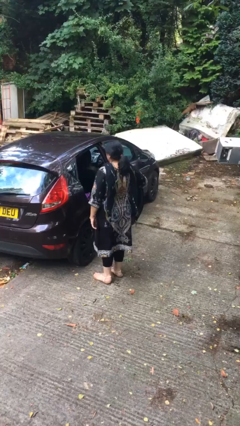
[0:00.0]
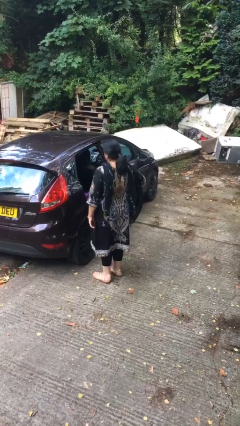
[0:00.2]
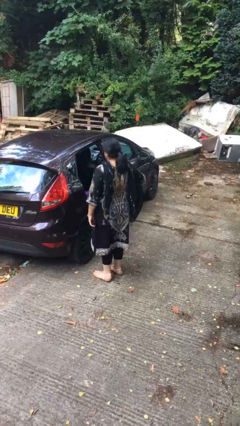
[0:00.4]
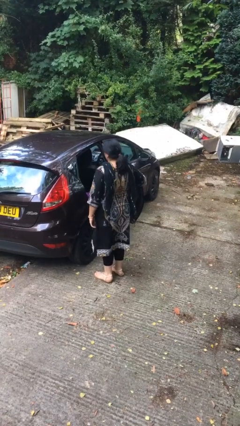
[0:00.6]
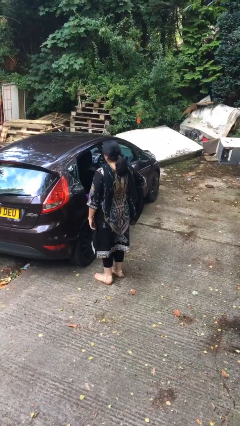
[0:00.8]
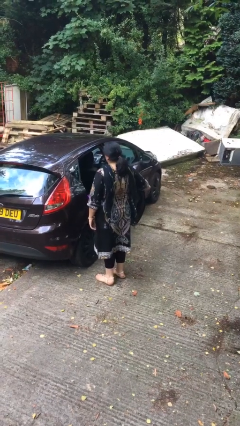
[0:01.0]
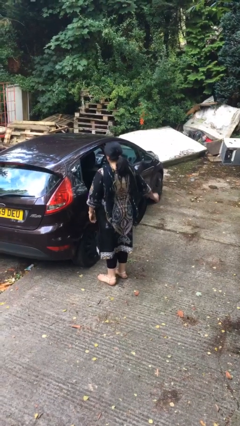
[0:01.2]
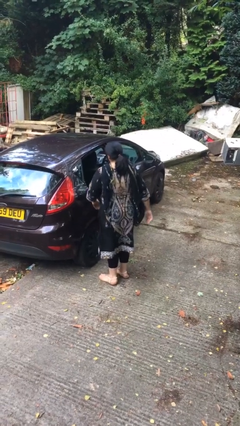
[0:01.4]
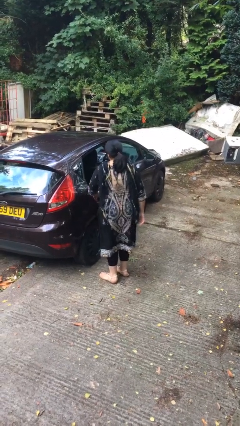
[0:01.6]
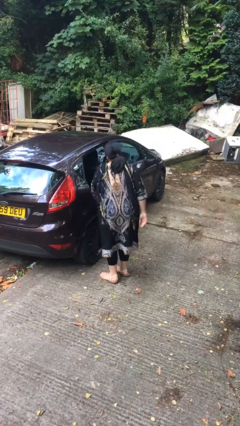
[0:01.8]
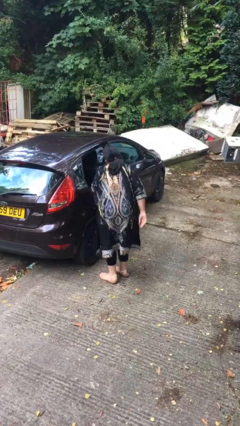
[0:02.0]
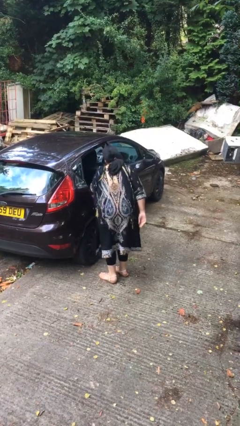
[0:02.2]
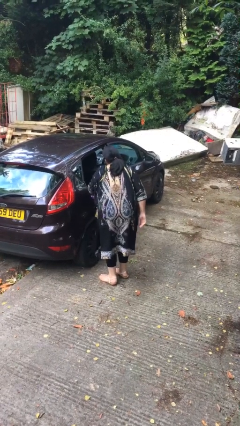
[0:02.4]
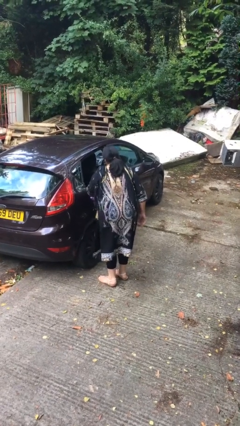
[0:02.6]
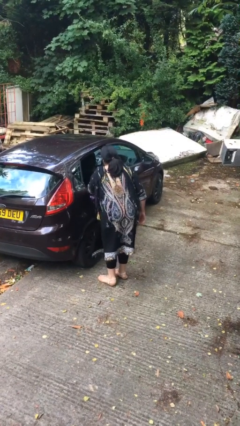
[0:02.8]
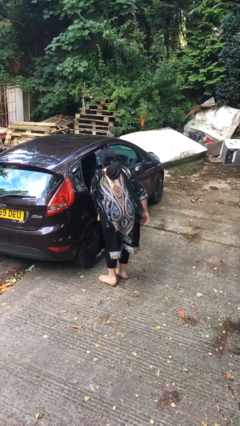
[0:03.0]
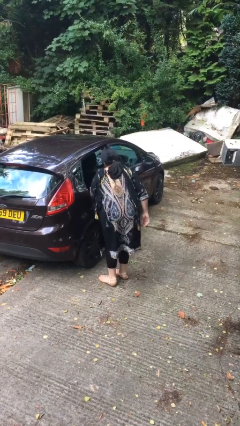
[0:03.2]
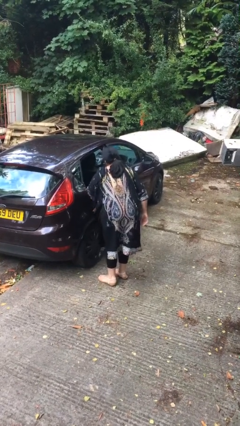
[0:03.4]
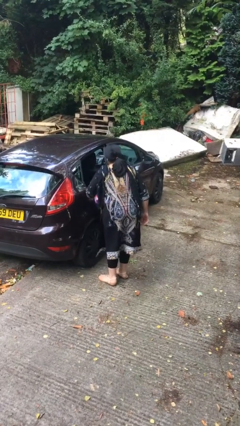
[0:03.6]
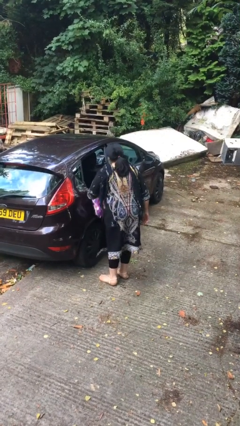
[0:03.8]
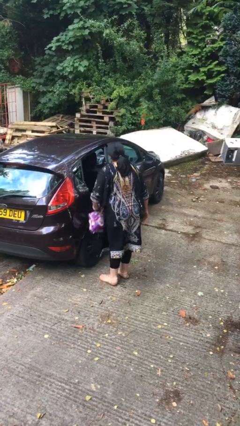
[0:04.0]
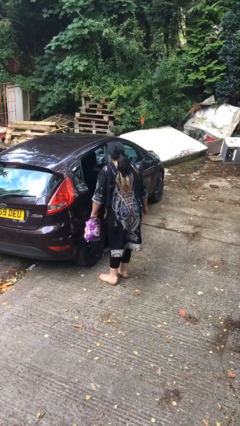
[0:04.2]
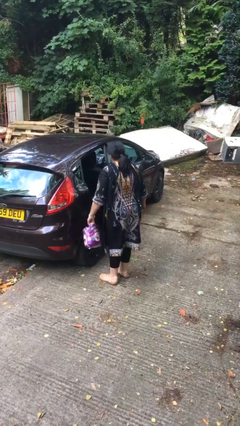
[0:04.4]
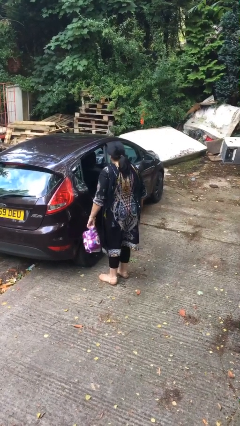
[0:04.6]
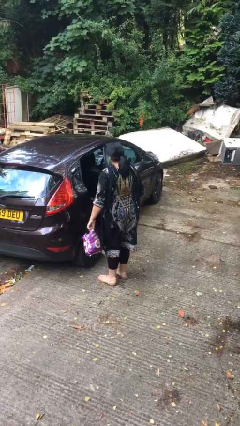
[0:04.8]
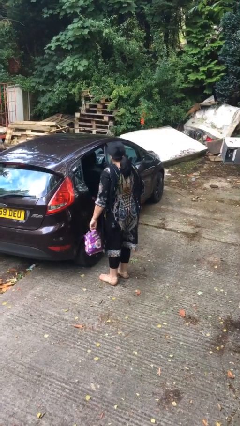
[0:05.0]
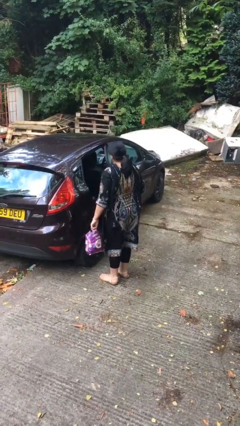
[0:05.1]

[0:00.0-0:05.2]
person unloads car

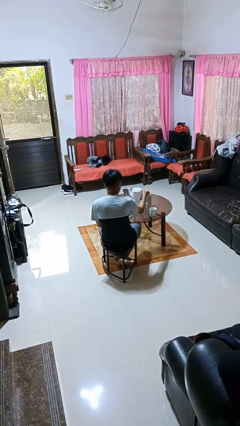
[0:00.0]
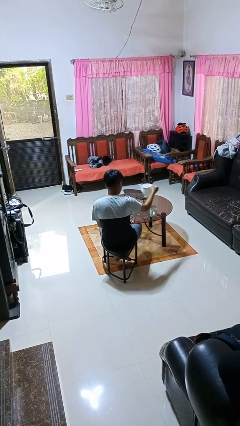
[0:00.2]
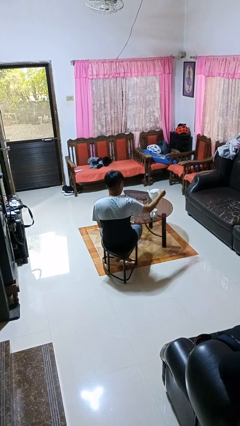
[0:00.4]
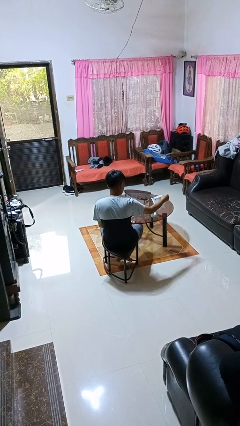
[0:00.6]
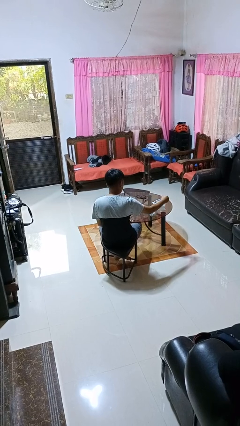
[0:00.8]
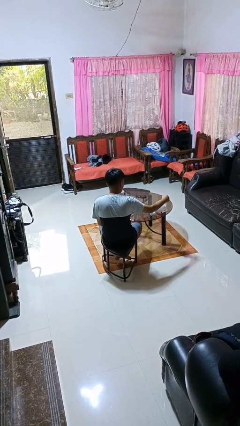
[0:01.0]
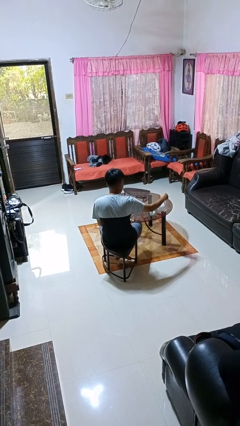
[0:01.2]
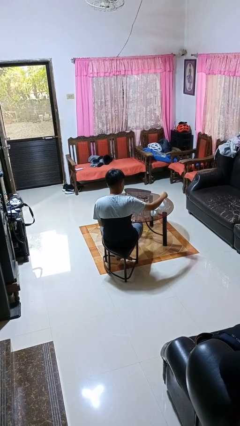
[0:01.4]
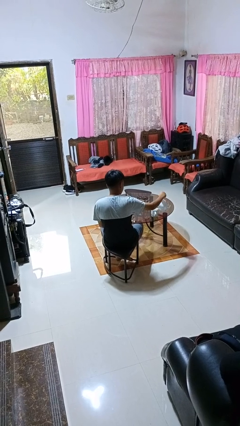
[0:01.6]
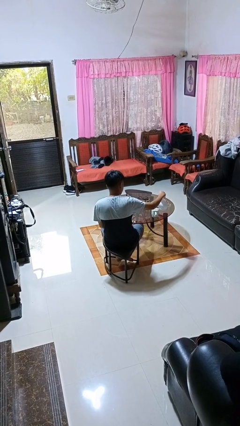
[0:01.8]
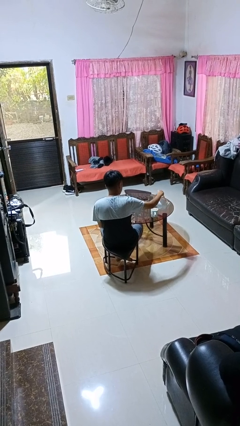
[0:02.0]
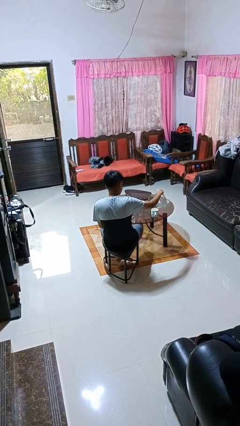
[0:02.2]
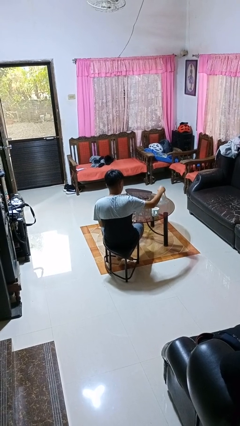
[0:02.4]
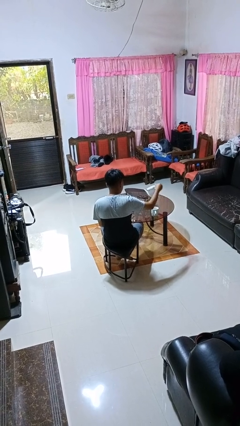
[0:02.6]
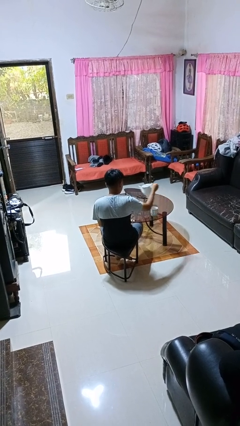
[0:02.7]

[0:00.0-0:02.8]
person pours coffee into mug

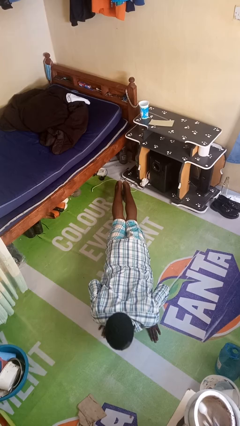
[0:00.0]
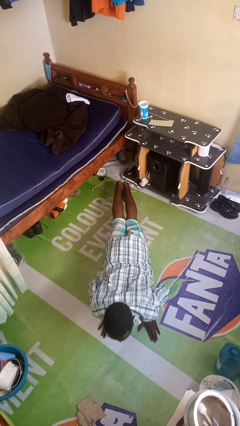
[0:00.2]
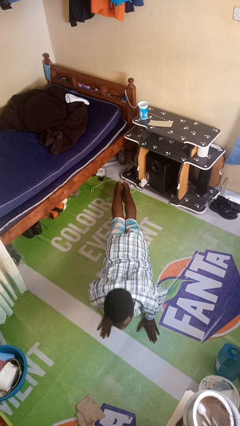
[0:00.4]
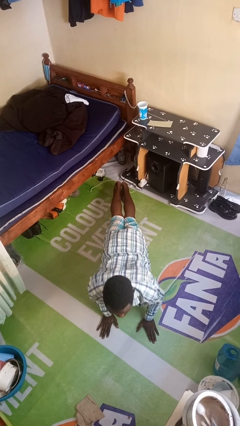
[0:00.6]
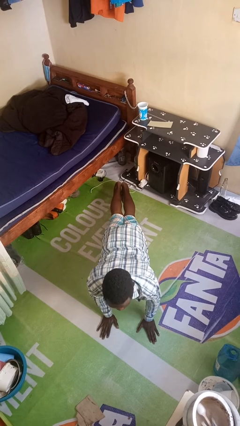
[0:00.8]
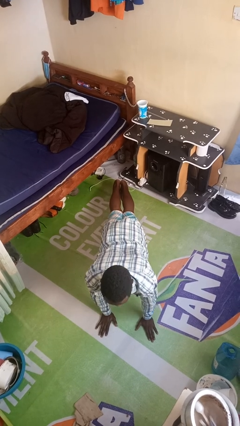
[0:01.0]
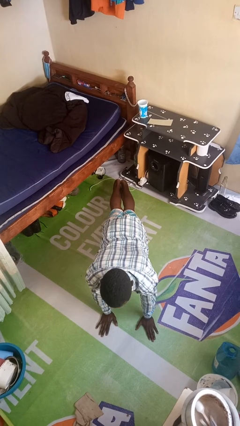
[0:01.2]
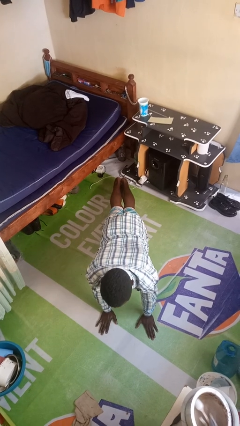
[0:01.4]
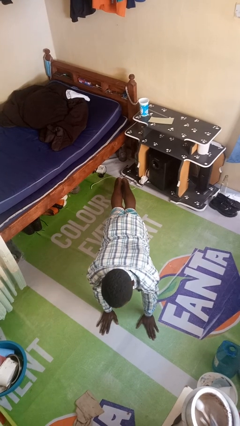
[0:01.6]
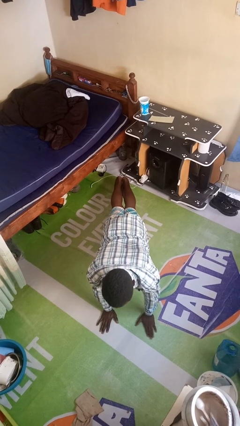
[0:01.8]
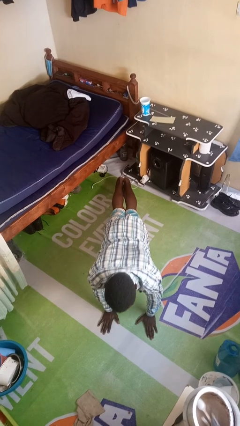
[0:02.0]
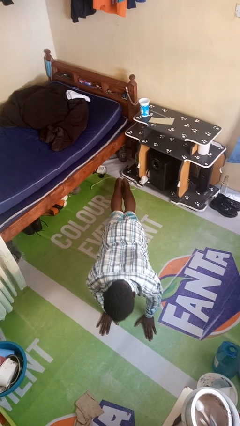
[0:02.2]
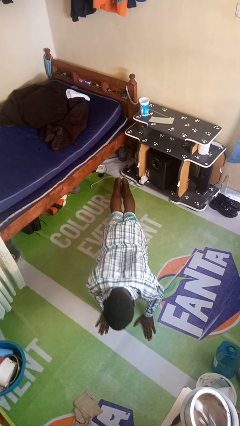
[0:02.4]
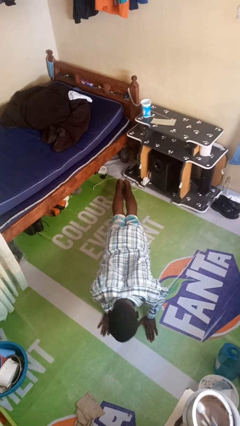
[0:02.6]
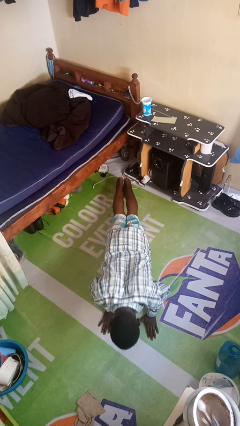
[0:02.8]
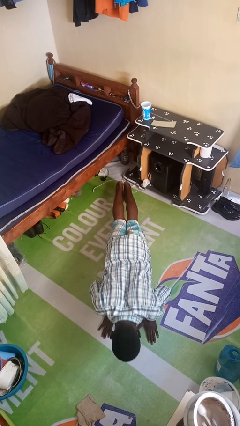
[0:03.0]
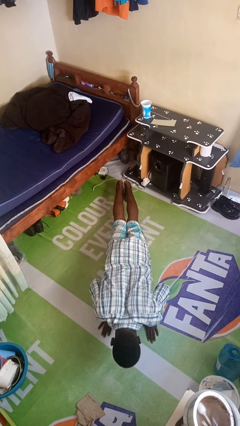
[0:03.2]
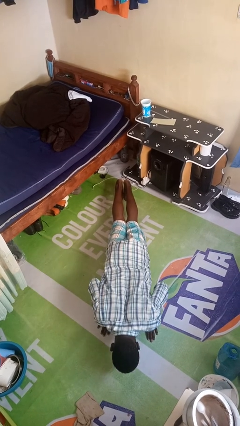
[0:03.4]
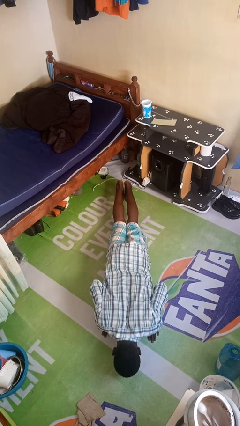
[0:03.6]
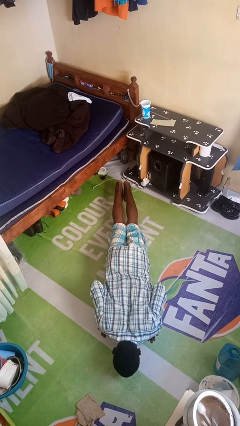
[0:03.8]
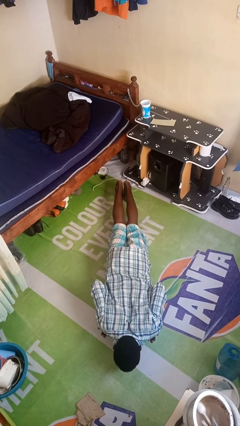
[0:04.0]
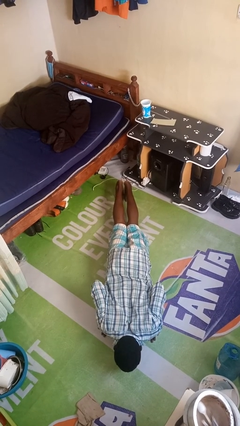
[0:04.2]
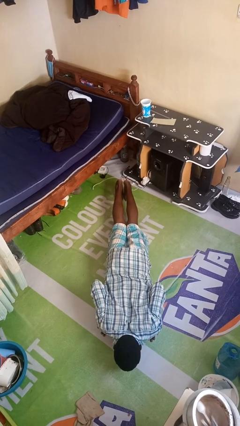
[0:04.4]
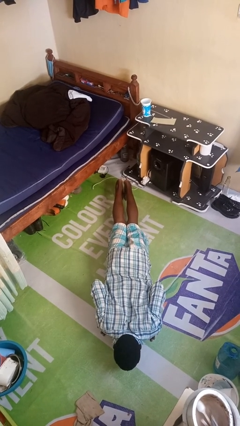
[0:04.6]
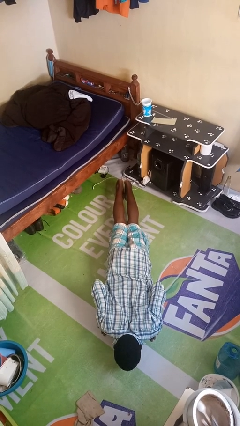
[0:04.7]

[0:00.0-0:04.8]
person exercises with pushup

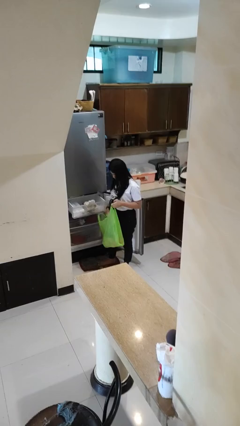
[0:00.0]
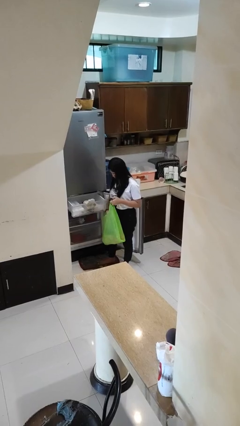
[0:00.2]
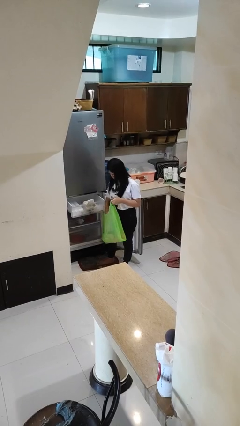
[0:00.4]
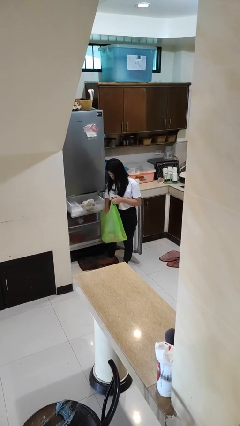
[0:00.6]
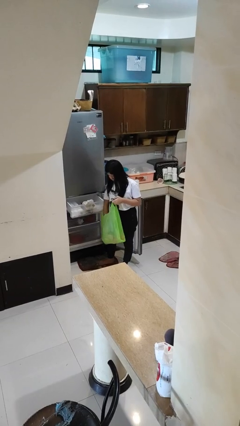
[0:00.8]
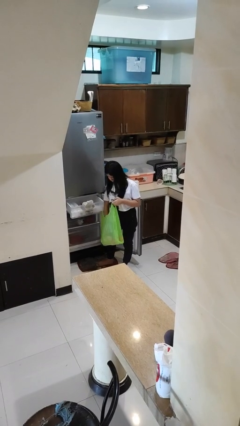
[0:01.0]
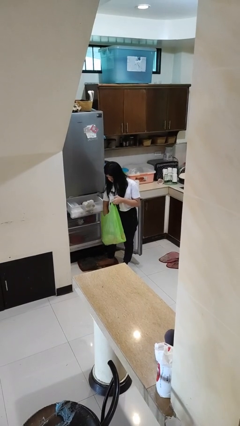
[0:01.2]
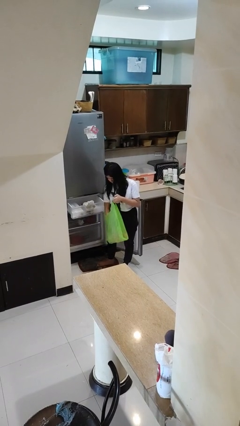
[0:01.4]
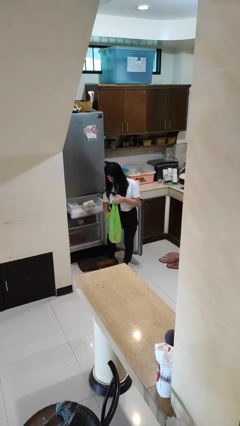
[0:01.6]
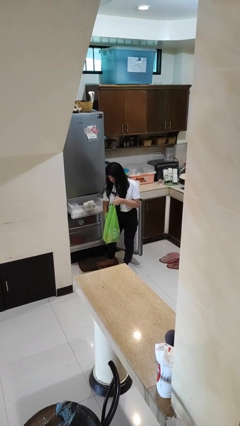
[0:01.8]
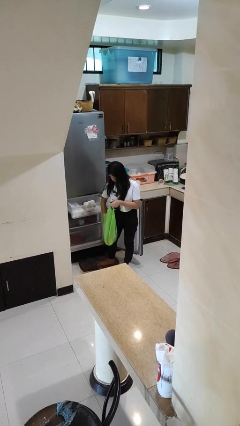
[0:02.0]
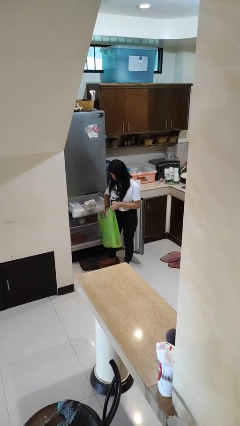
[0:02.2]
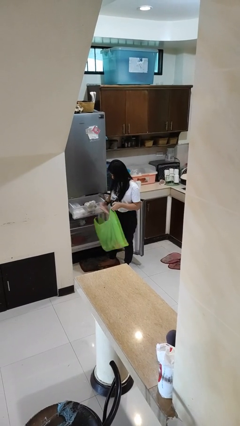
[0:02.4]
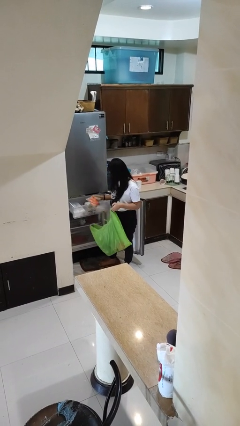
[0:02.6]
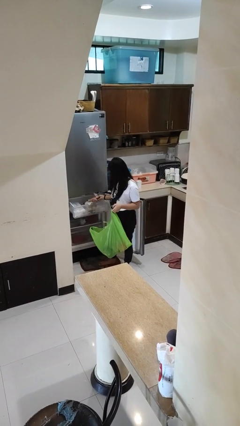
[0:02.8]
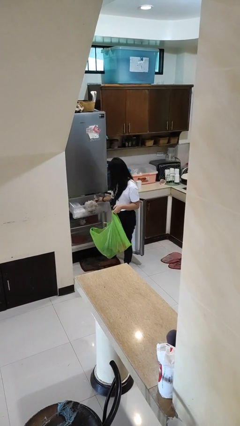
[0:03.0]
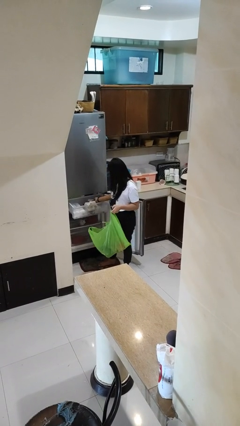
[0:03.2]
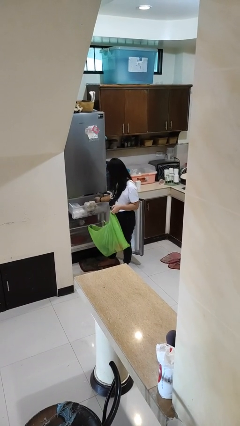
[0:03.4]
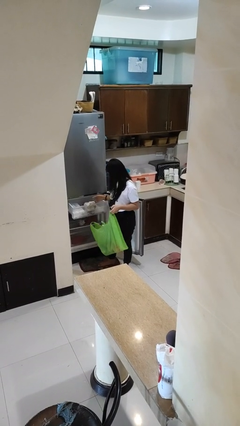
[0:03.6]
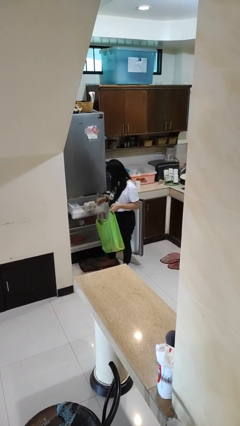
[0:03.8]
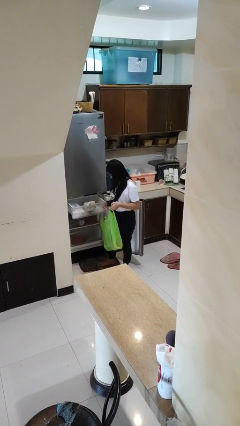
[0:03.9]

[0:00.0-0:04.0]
person loads groceries into refrigerator

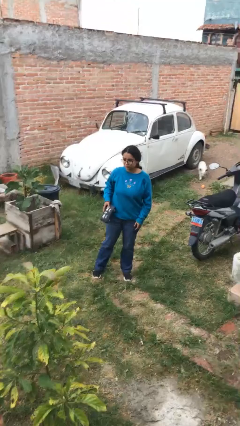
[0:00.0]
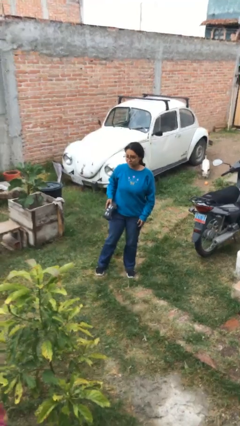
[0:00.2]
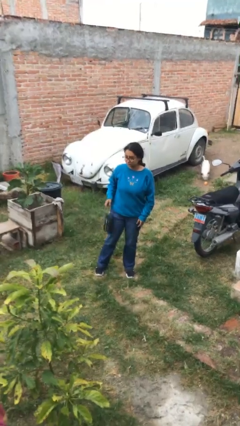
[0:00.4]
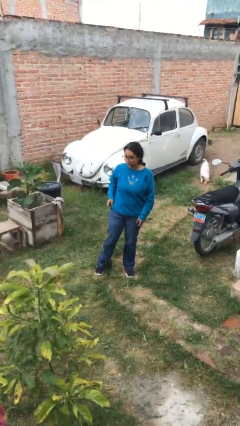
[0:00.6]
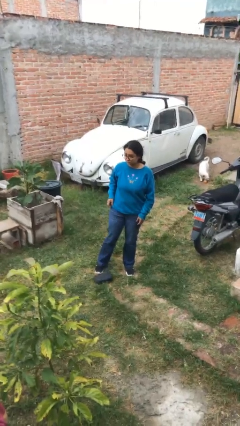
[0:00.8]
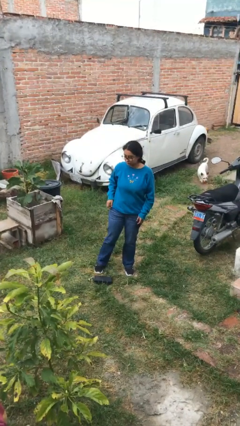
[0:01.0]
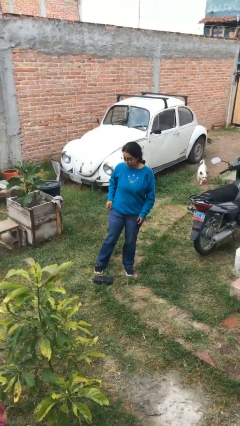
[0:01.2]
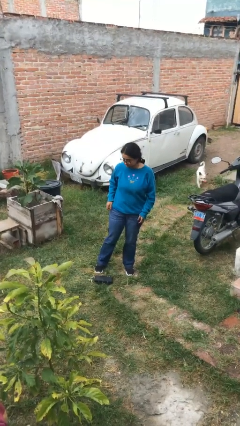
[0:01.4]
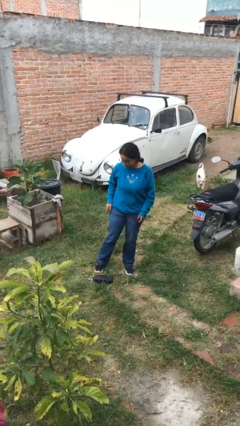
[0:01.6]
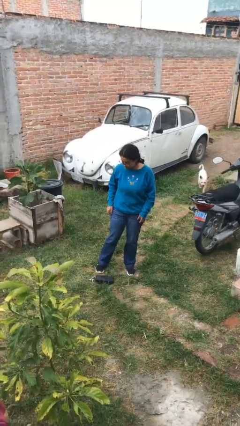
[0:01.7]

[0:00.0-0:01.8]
person drops object
